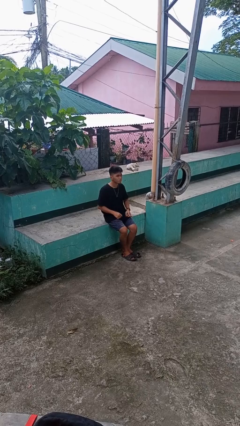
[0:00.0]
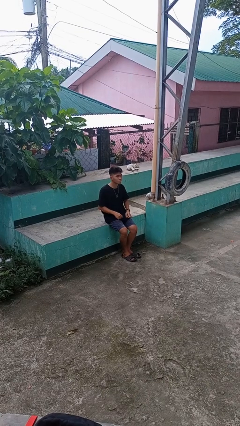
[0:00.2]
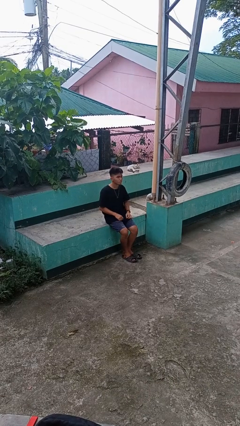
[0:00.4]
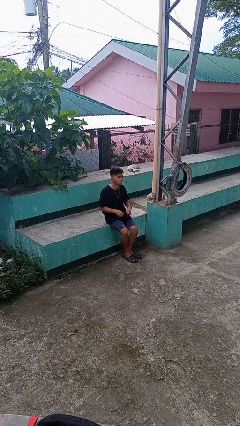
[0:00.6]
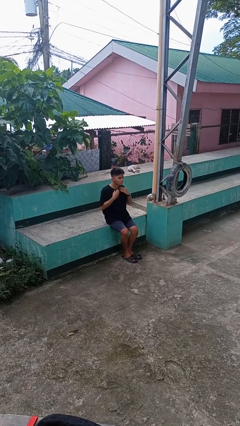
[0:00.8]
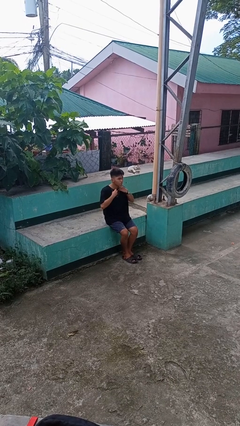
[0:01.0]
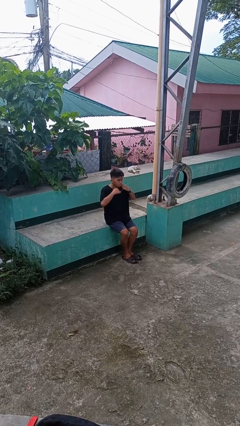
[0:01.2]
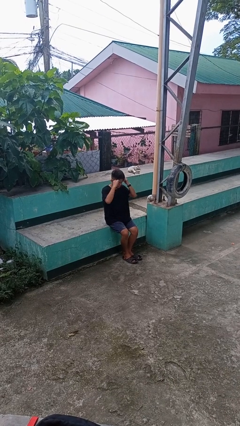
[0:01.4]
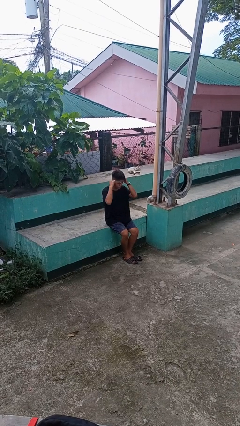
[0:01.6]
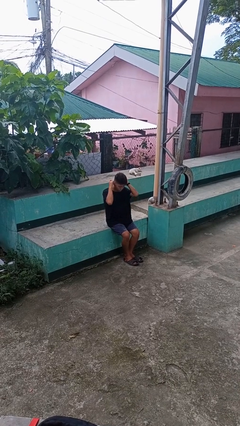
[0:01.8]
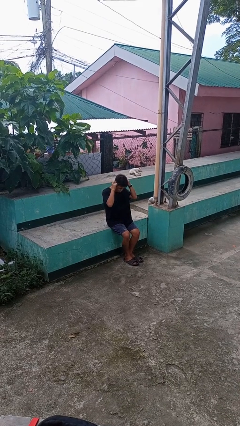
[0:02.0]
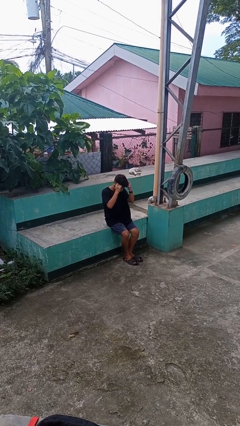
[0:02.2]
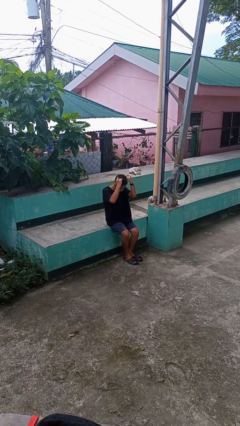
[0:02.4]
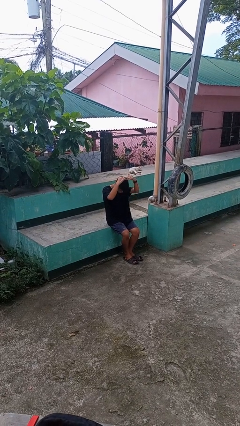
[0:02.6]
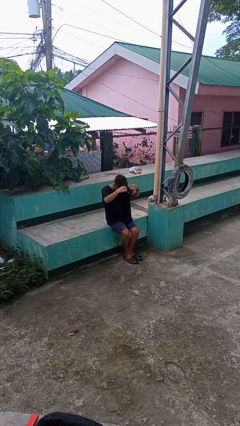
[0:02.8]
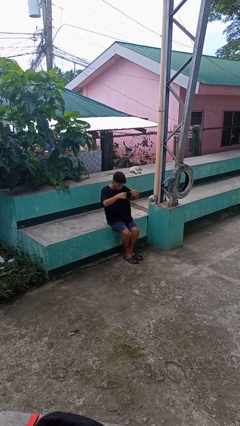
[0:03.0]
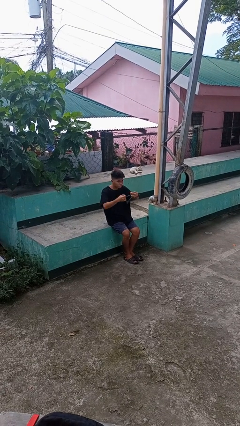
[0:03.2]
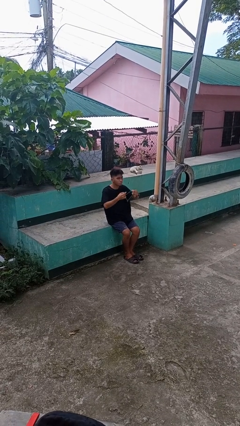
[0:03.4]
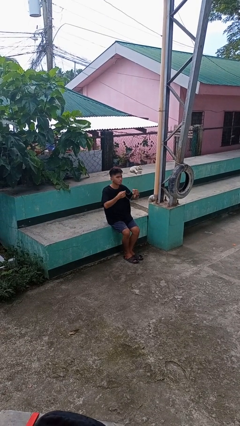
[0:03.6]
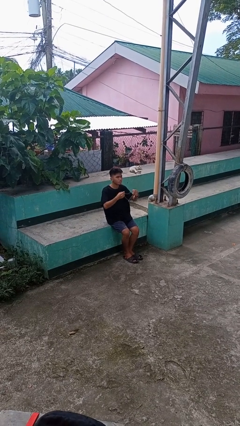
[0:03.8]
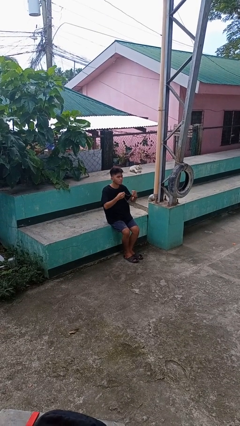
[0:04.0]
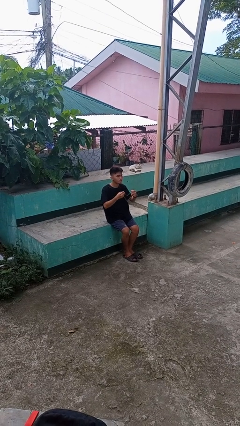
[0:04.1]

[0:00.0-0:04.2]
person takes off necklace

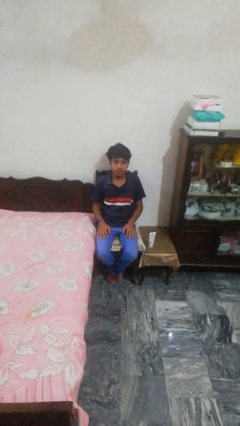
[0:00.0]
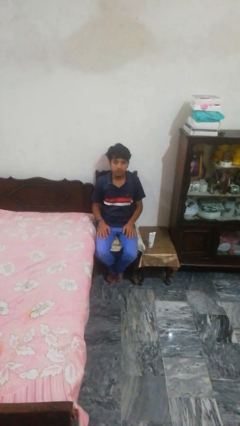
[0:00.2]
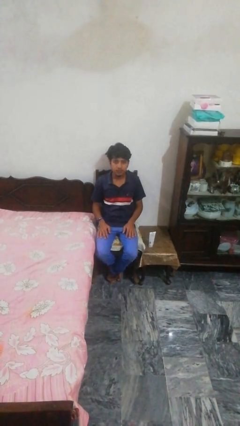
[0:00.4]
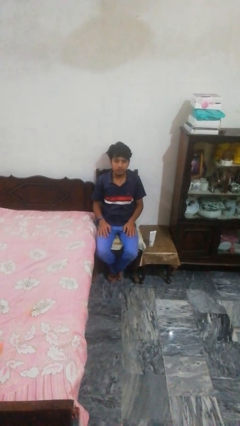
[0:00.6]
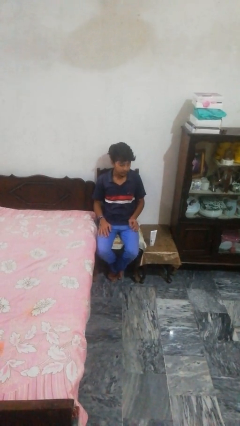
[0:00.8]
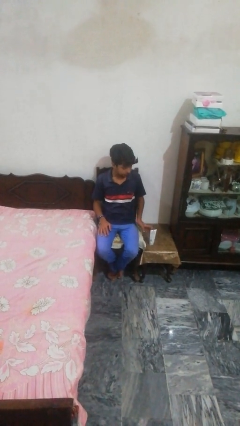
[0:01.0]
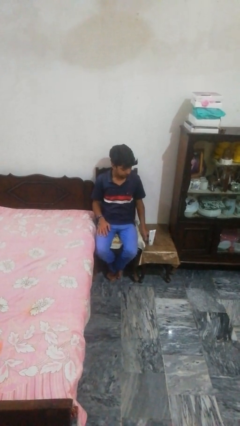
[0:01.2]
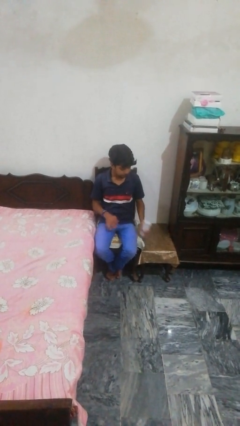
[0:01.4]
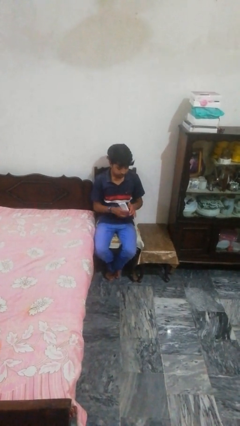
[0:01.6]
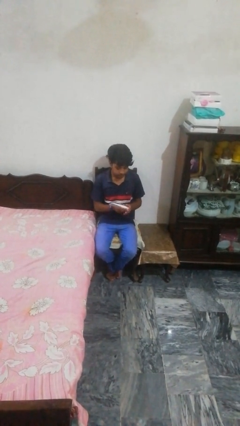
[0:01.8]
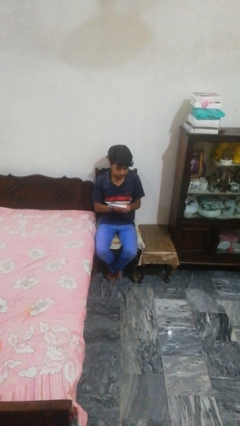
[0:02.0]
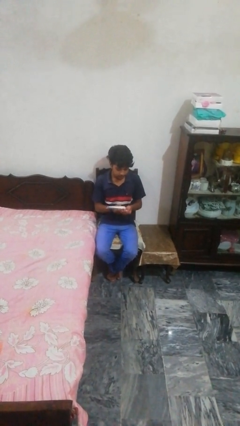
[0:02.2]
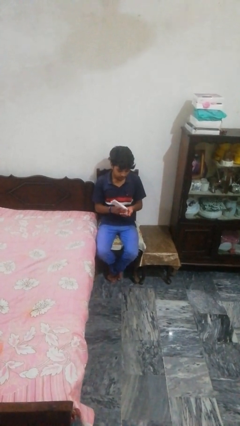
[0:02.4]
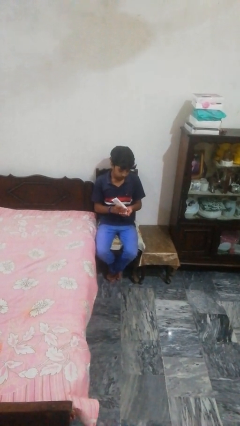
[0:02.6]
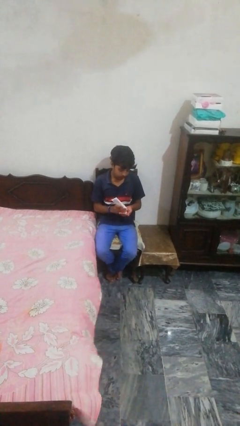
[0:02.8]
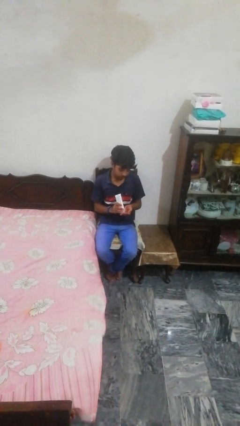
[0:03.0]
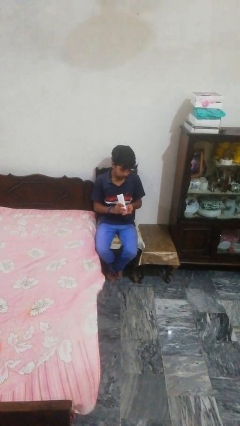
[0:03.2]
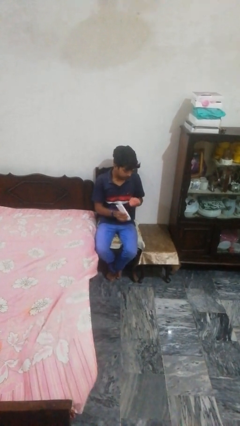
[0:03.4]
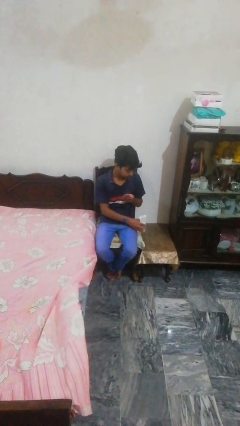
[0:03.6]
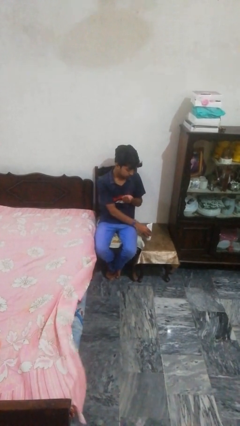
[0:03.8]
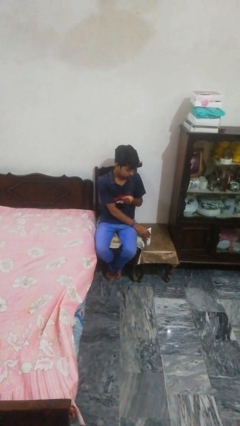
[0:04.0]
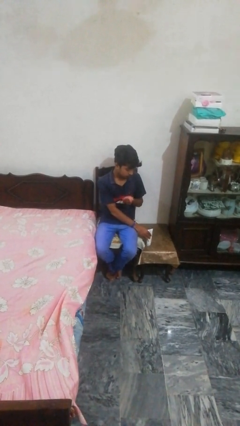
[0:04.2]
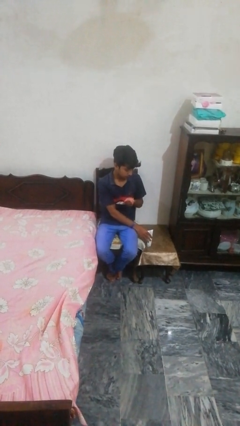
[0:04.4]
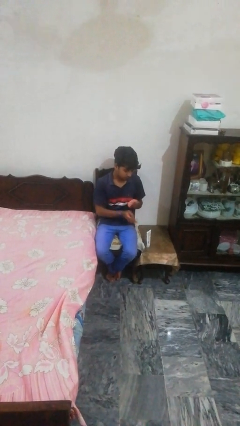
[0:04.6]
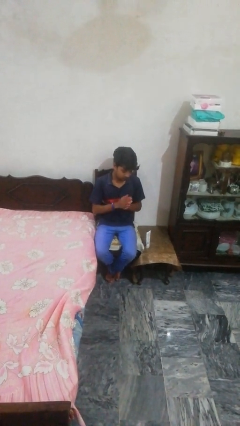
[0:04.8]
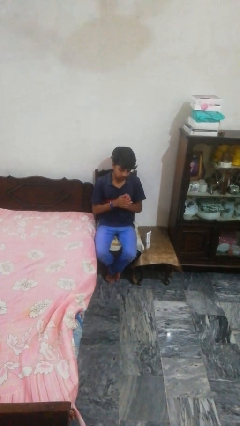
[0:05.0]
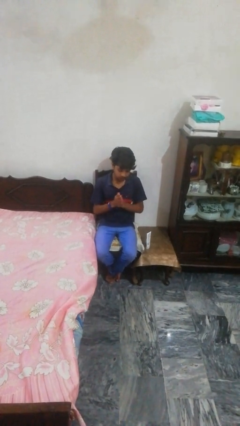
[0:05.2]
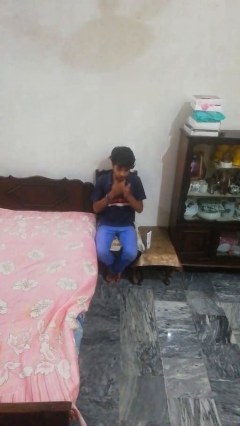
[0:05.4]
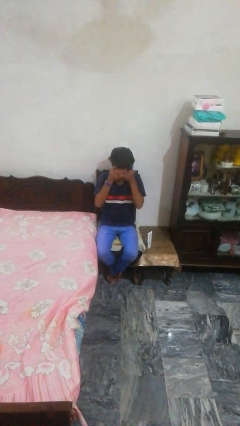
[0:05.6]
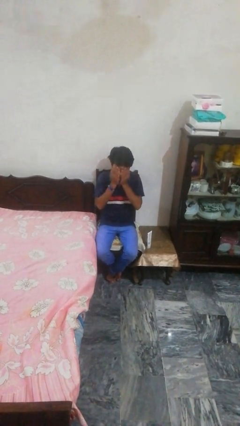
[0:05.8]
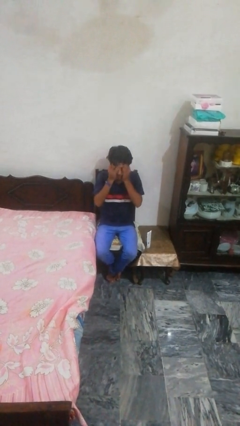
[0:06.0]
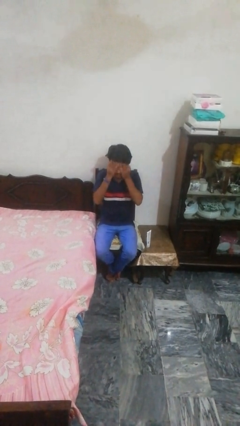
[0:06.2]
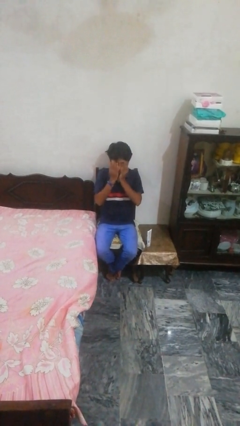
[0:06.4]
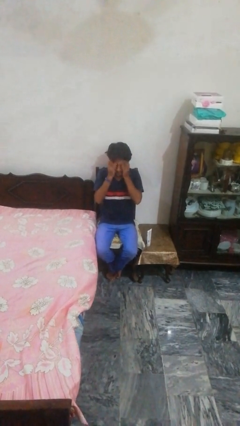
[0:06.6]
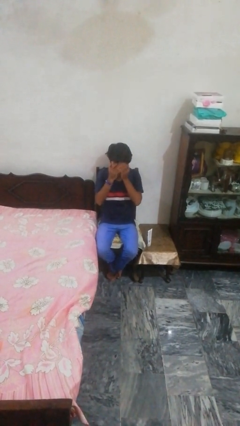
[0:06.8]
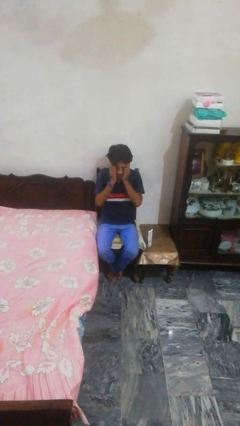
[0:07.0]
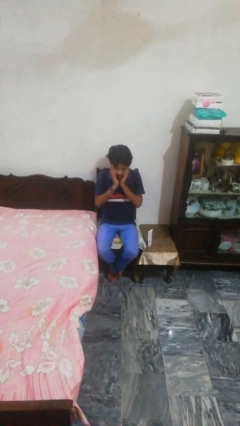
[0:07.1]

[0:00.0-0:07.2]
person applies facial moisturizer

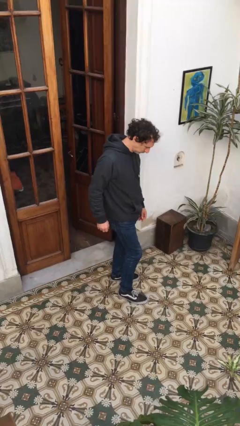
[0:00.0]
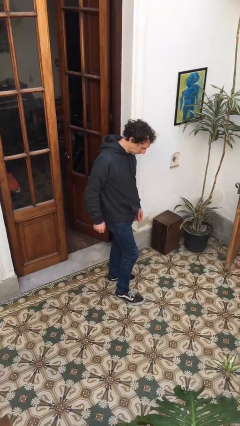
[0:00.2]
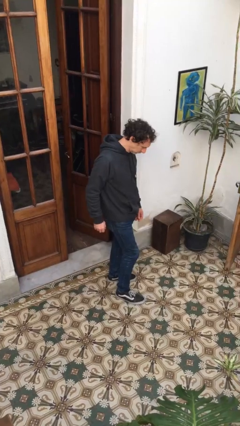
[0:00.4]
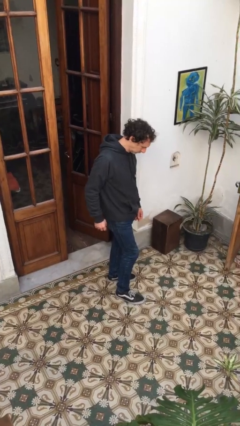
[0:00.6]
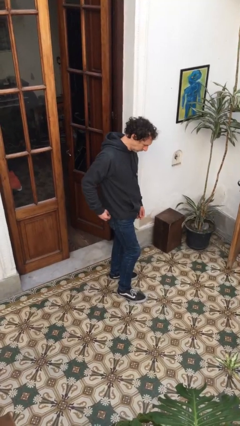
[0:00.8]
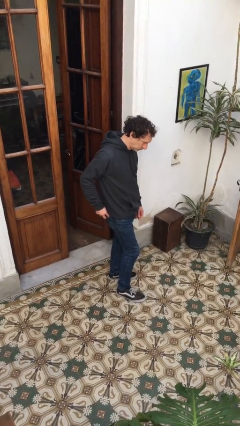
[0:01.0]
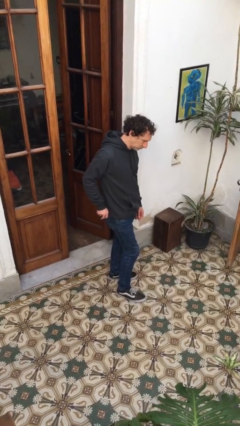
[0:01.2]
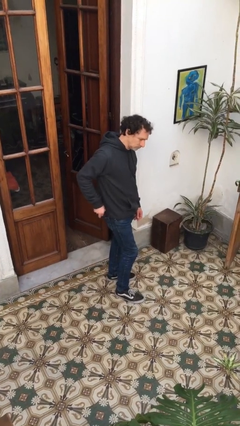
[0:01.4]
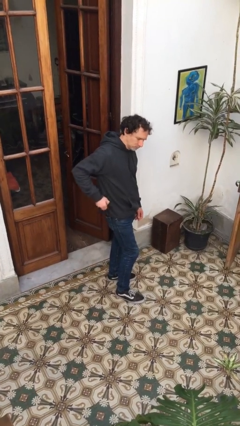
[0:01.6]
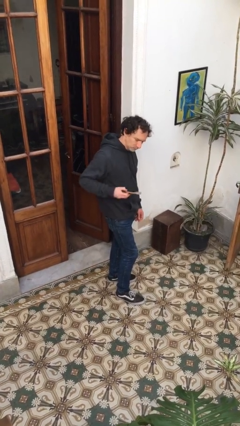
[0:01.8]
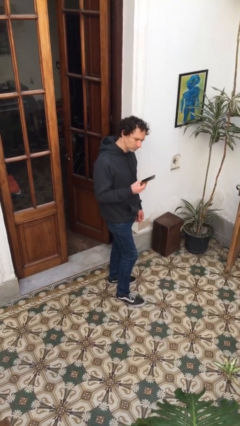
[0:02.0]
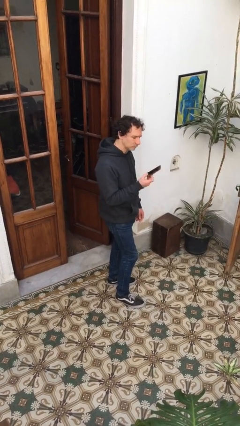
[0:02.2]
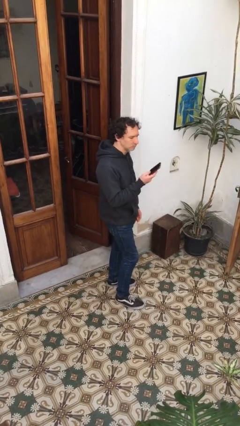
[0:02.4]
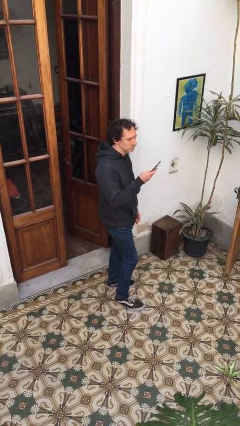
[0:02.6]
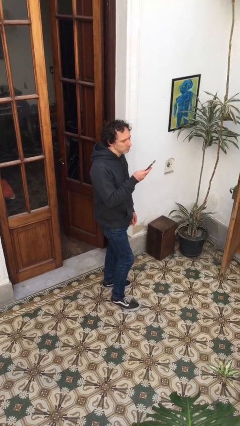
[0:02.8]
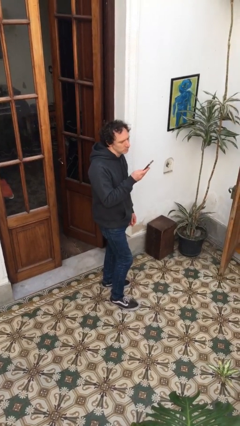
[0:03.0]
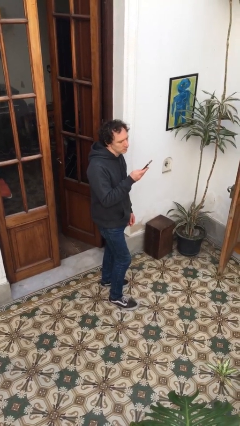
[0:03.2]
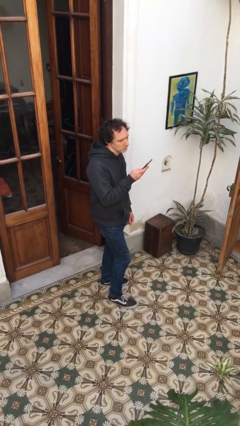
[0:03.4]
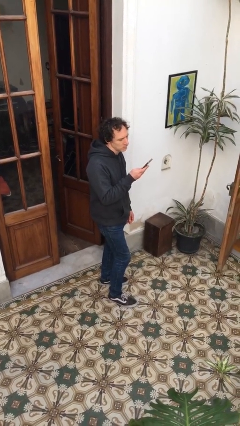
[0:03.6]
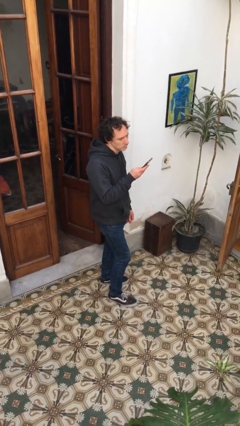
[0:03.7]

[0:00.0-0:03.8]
person takes phone from pocket

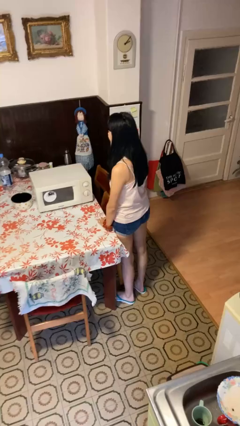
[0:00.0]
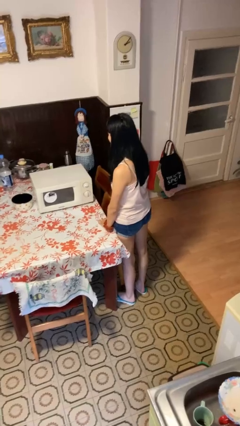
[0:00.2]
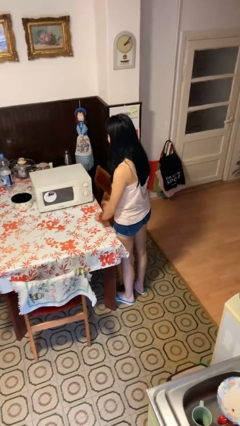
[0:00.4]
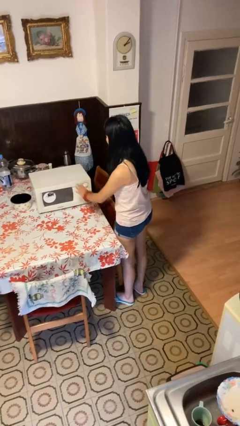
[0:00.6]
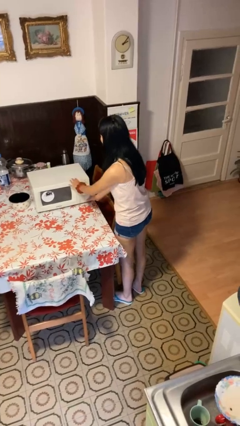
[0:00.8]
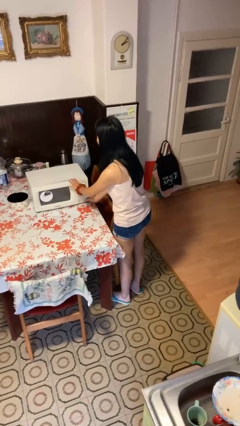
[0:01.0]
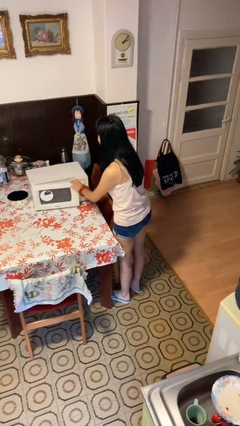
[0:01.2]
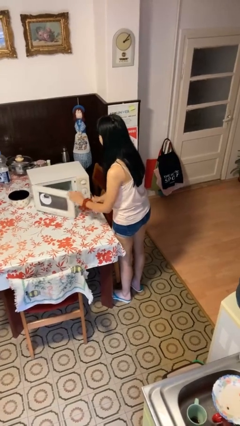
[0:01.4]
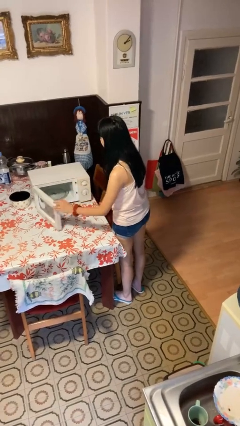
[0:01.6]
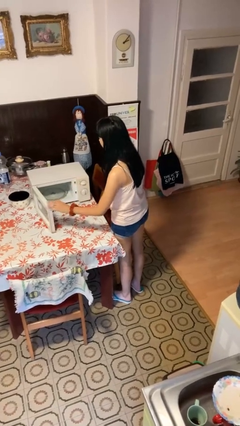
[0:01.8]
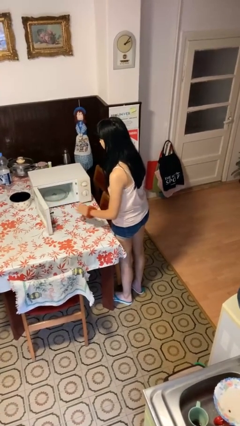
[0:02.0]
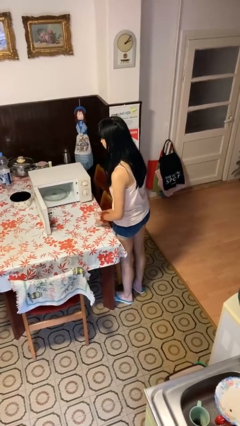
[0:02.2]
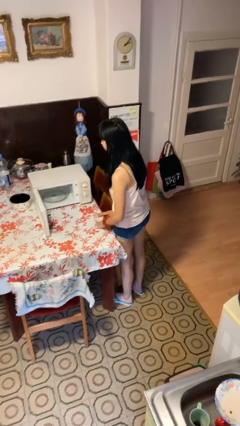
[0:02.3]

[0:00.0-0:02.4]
person opens microwave

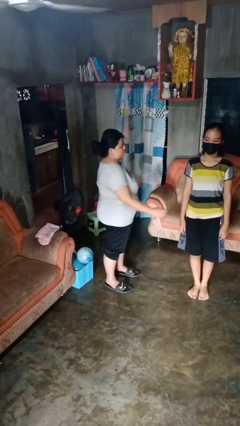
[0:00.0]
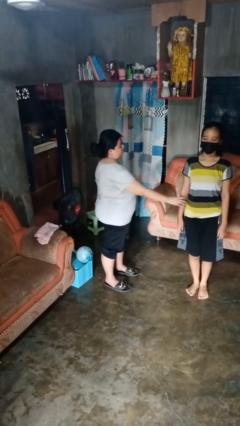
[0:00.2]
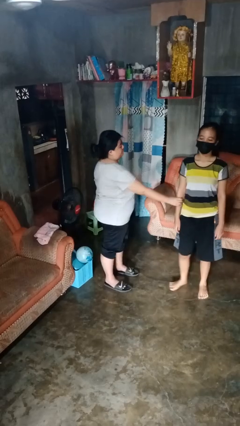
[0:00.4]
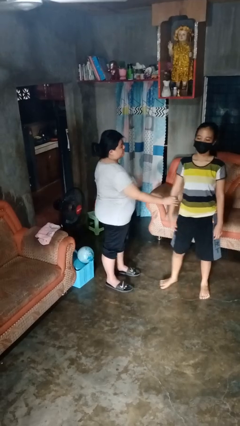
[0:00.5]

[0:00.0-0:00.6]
person grabs person by forearm
